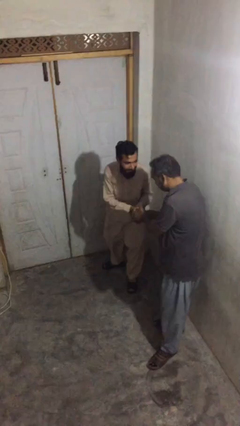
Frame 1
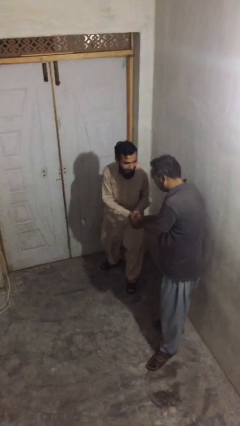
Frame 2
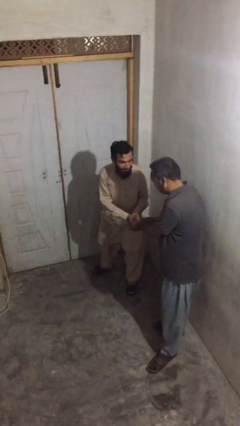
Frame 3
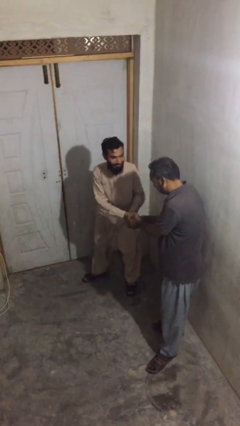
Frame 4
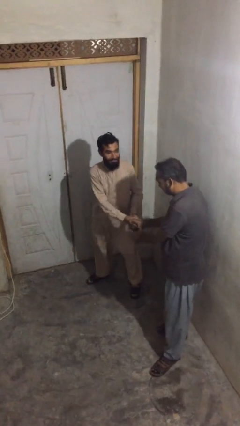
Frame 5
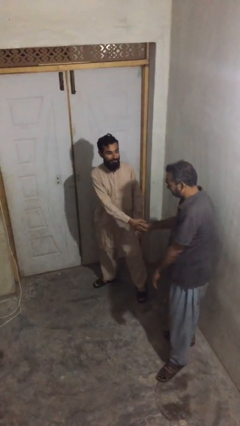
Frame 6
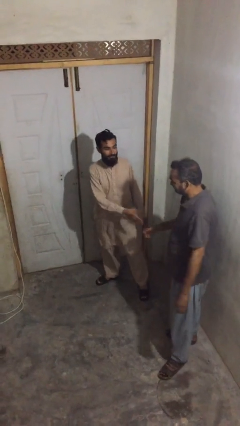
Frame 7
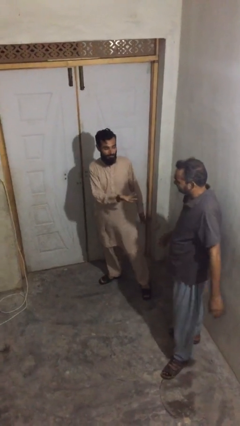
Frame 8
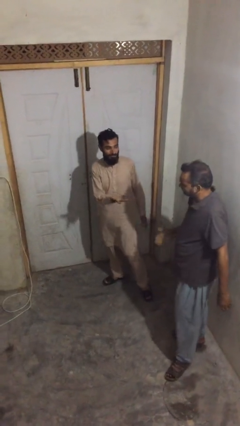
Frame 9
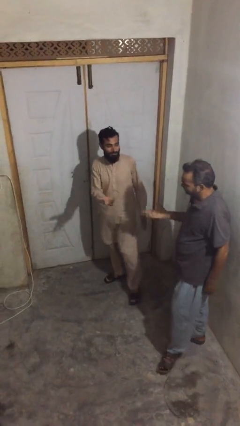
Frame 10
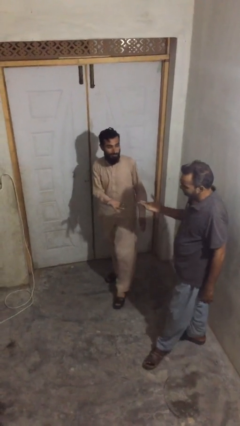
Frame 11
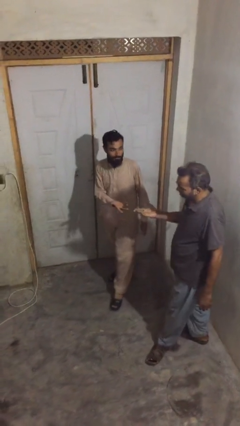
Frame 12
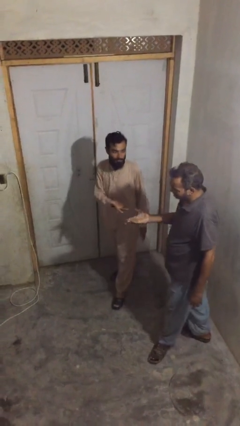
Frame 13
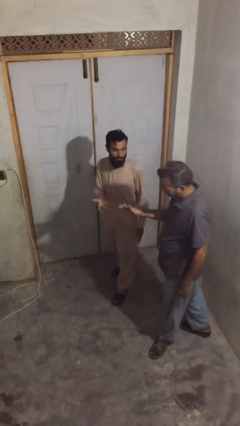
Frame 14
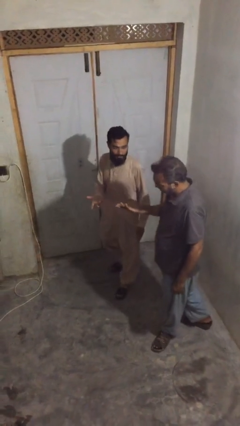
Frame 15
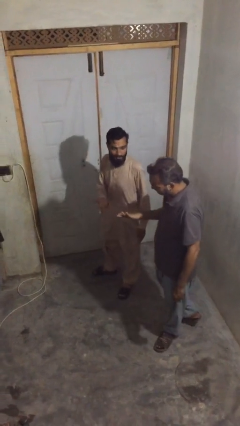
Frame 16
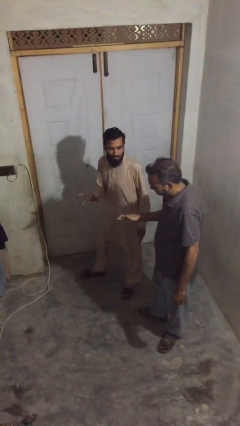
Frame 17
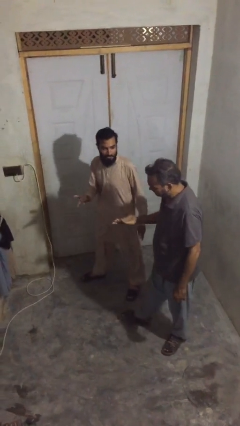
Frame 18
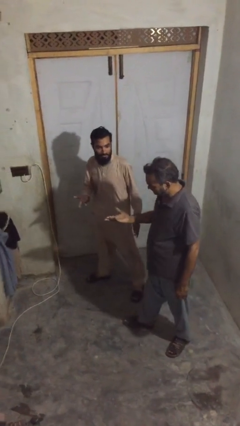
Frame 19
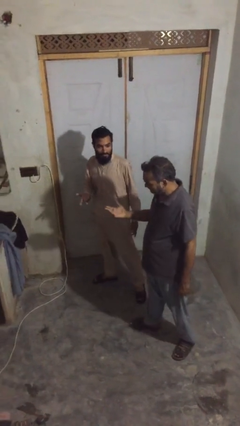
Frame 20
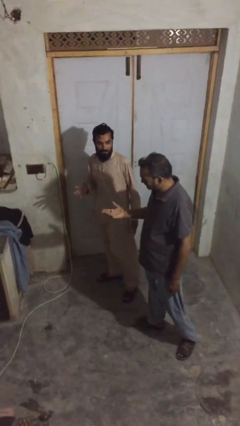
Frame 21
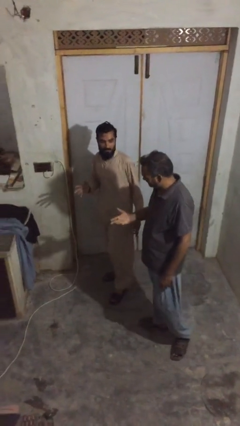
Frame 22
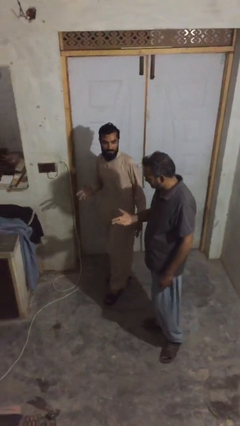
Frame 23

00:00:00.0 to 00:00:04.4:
person talks to person

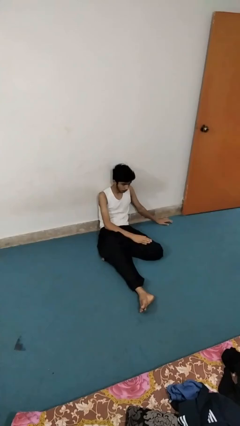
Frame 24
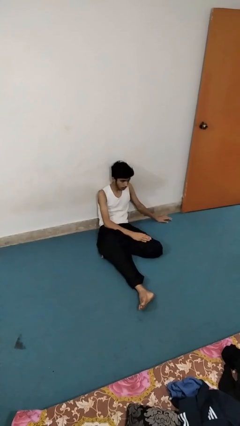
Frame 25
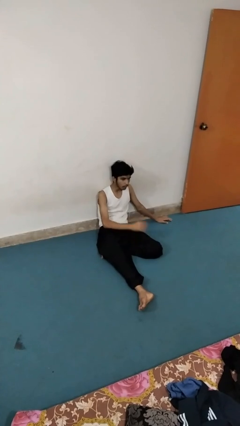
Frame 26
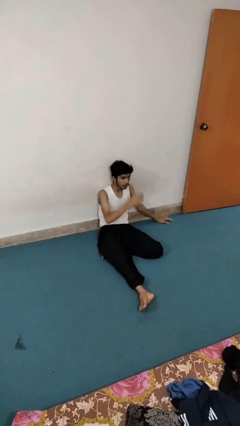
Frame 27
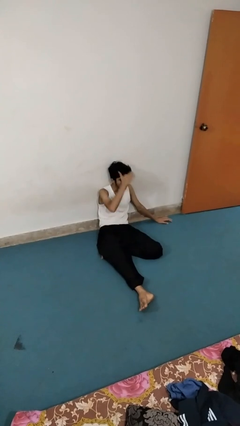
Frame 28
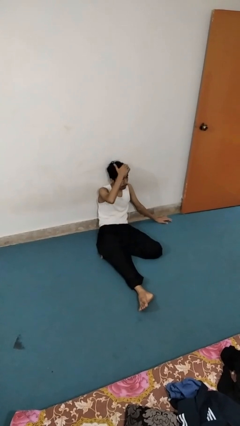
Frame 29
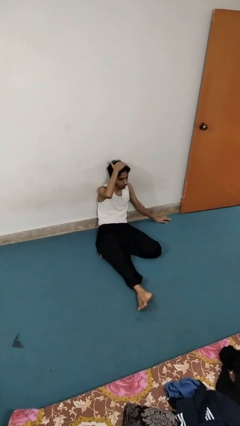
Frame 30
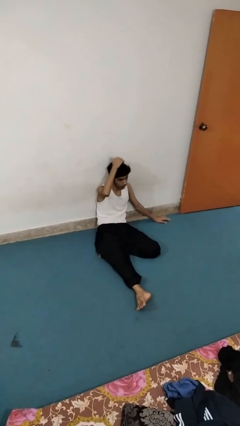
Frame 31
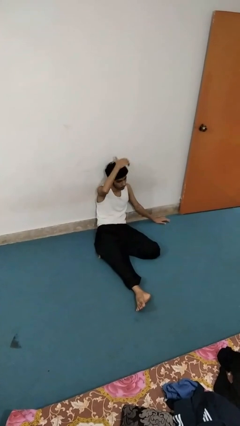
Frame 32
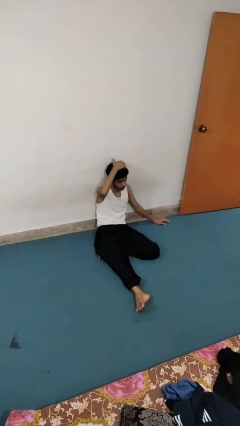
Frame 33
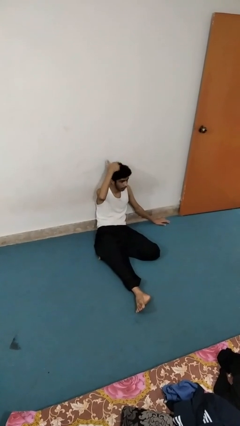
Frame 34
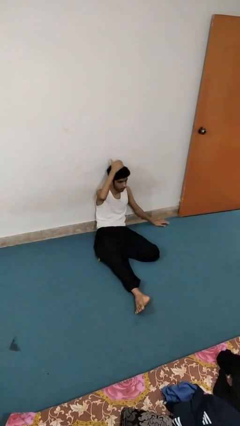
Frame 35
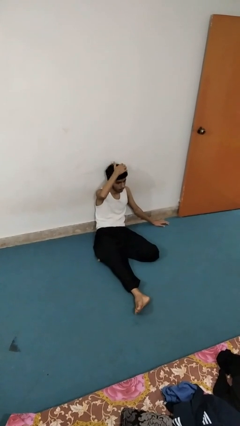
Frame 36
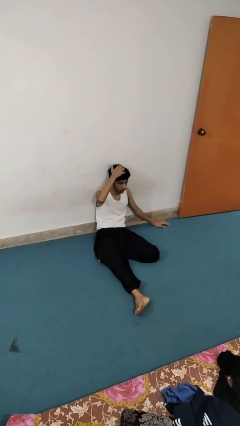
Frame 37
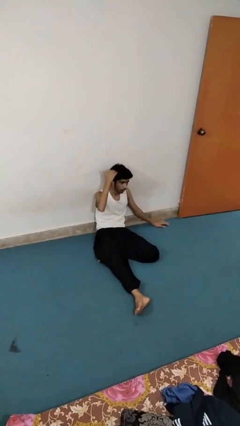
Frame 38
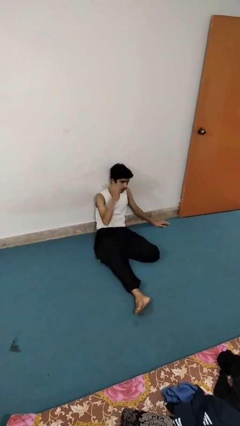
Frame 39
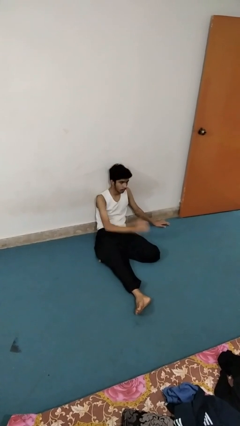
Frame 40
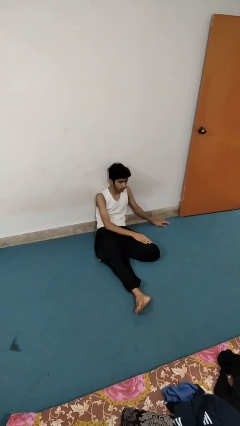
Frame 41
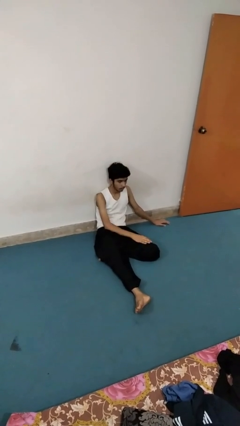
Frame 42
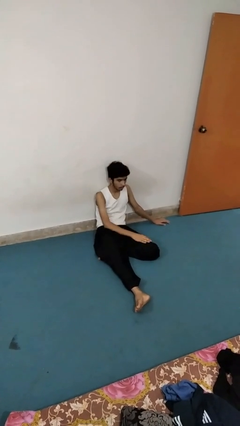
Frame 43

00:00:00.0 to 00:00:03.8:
person strokes hair

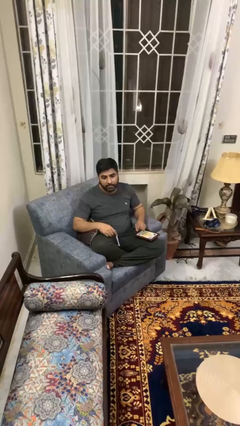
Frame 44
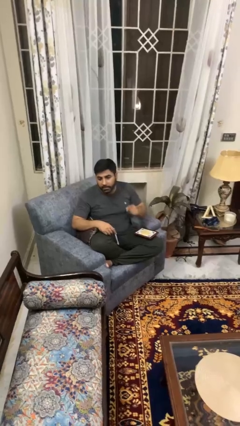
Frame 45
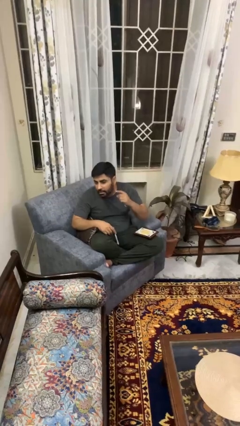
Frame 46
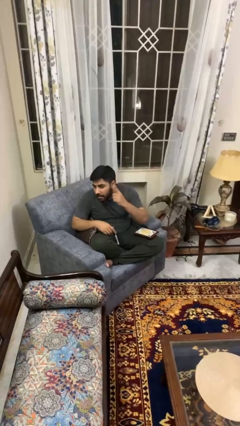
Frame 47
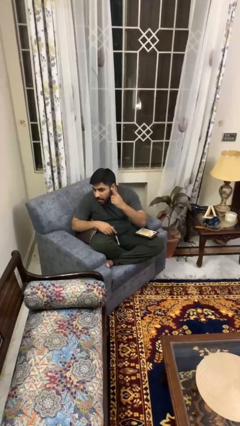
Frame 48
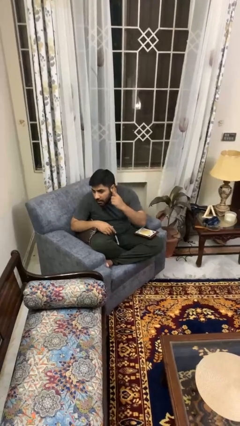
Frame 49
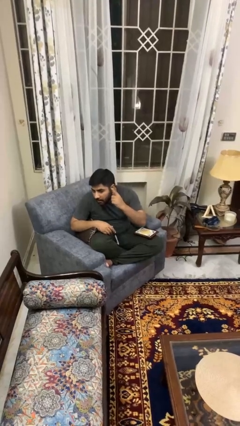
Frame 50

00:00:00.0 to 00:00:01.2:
person gestures listen closely

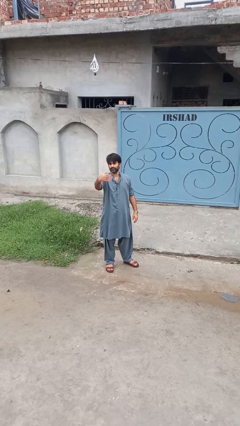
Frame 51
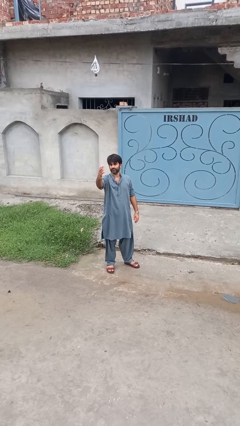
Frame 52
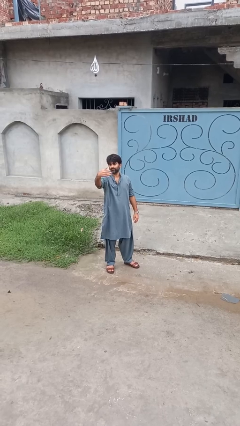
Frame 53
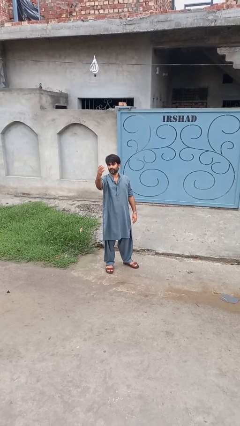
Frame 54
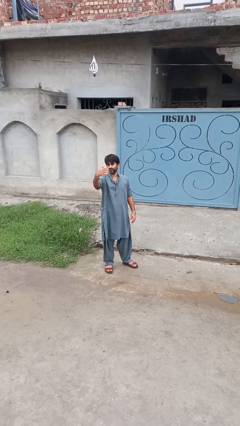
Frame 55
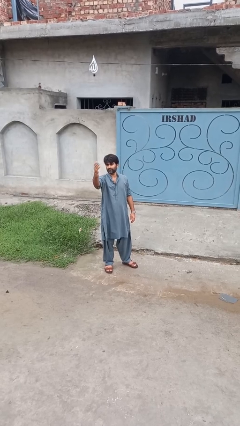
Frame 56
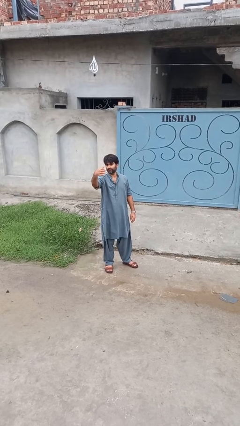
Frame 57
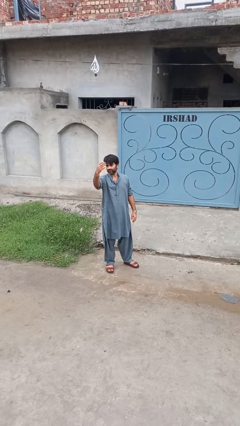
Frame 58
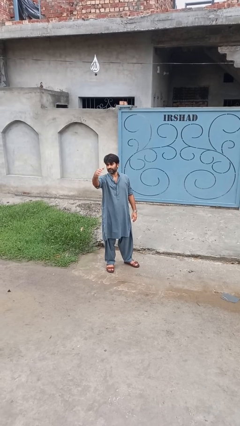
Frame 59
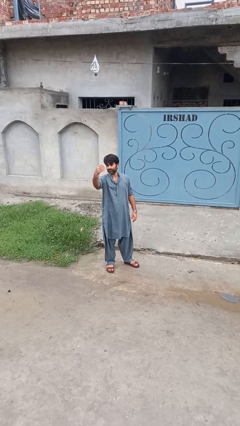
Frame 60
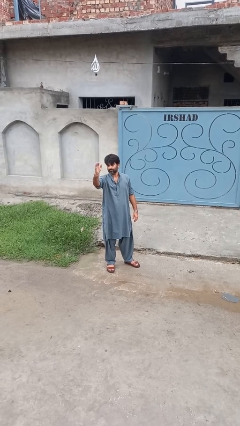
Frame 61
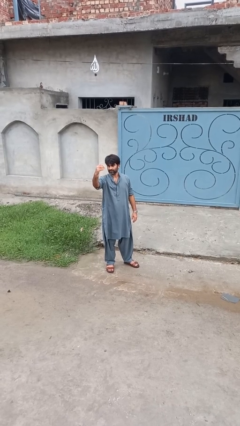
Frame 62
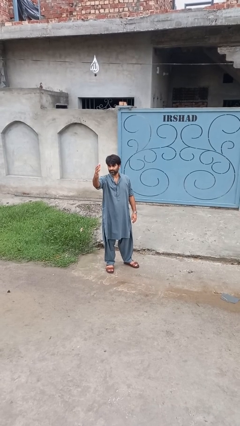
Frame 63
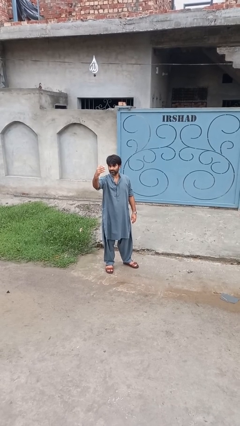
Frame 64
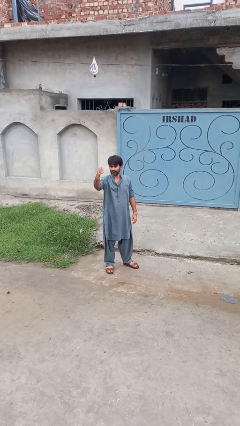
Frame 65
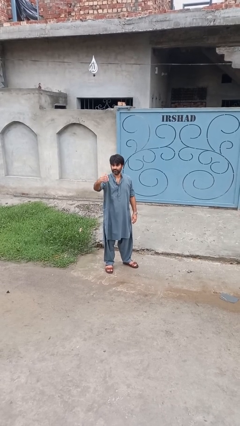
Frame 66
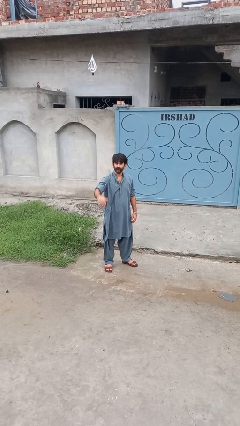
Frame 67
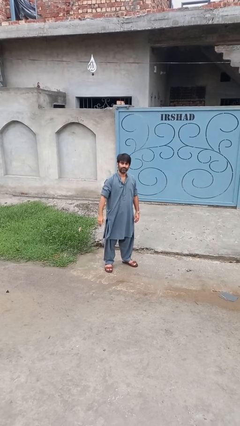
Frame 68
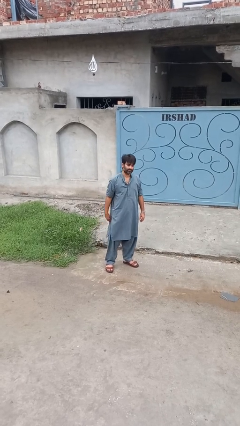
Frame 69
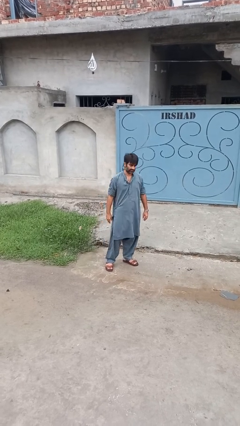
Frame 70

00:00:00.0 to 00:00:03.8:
person gestures come here

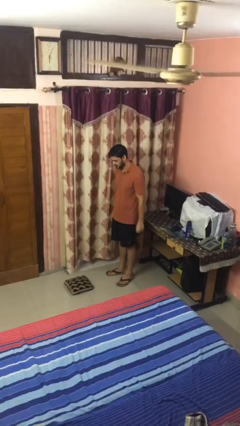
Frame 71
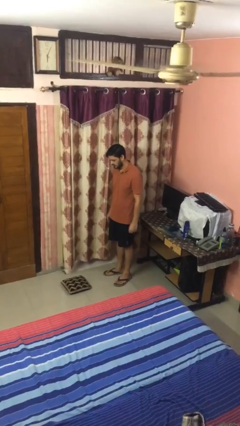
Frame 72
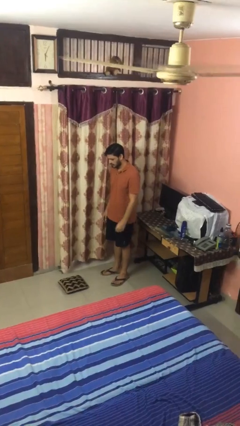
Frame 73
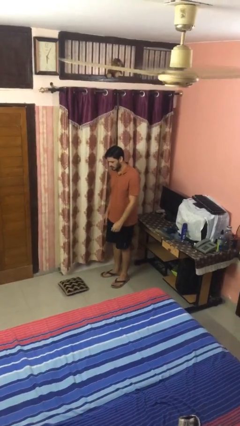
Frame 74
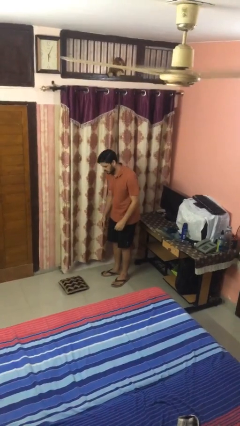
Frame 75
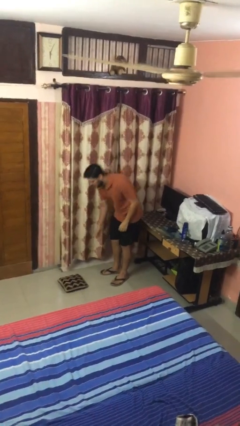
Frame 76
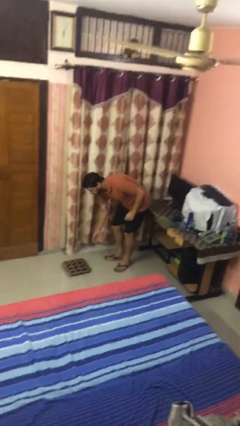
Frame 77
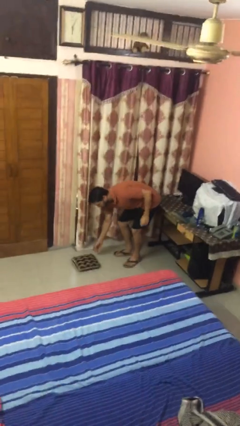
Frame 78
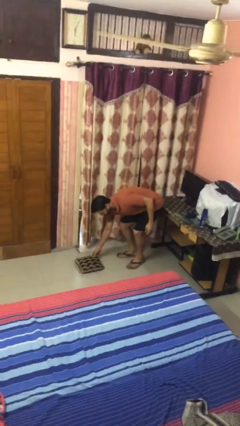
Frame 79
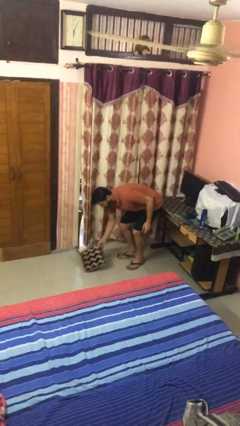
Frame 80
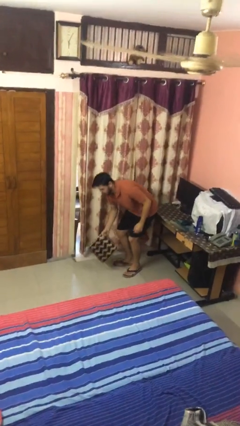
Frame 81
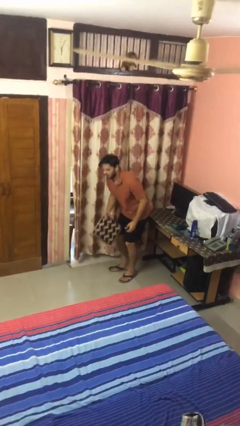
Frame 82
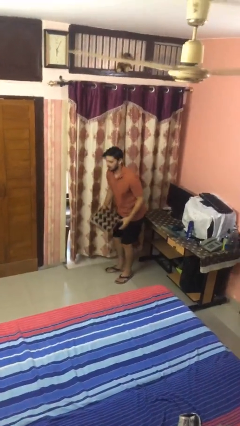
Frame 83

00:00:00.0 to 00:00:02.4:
person picks up object from floor

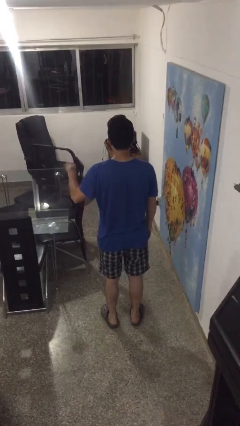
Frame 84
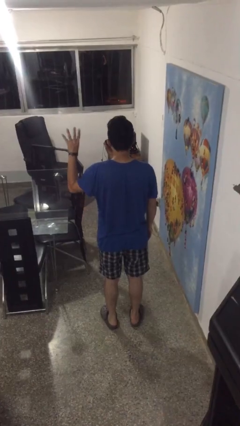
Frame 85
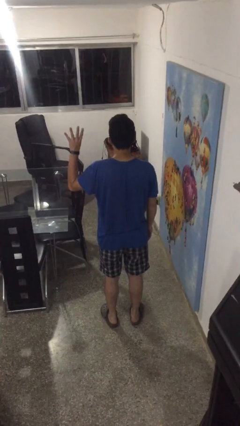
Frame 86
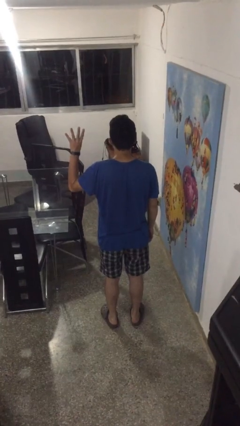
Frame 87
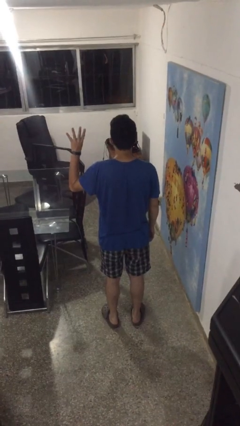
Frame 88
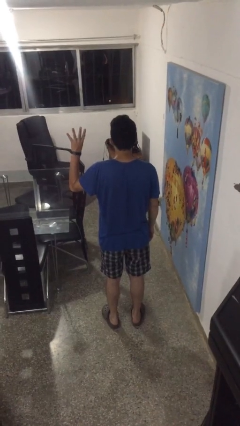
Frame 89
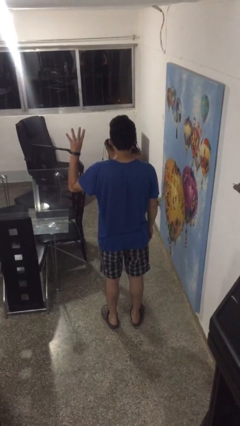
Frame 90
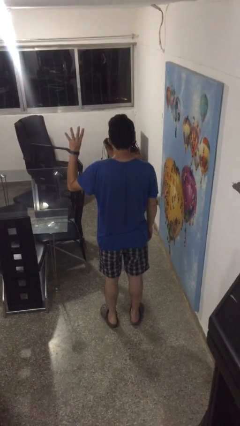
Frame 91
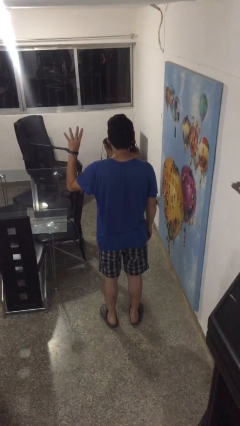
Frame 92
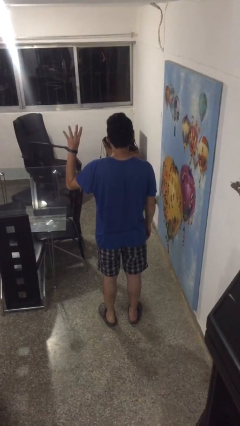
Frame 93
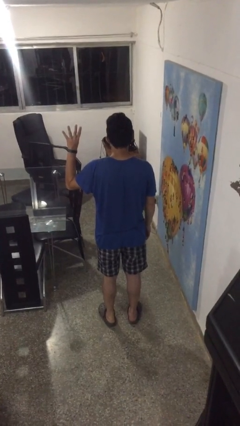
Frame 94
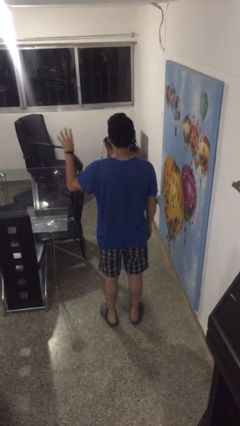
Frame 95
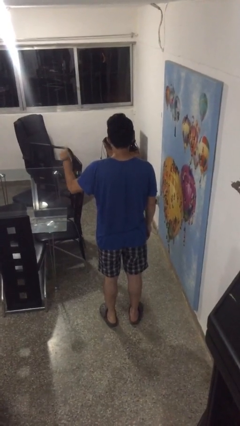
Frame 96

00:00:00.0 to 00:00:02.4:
person gestures number four
